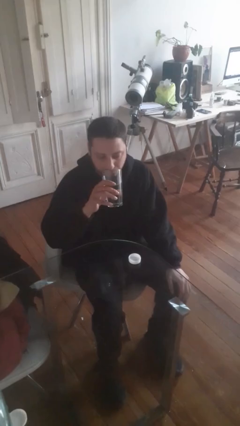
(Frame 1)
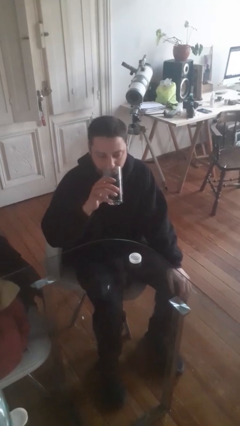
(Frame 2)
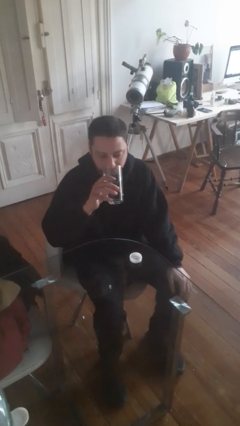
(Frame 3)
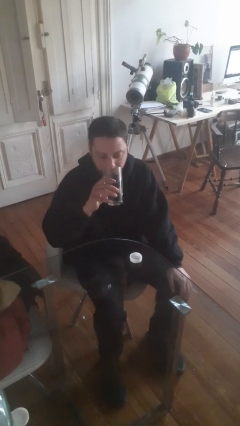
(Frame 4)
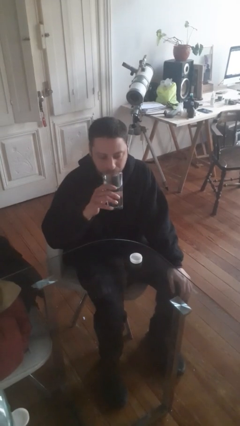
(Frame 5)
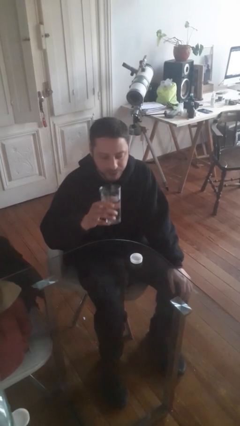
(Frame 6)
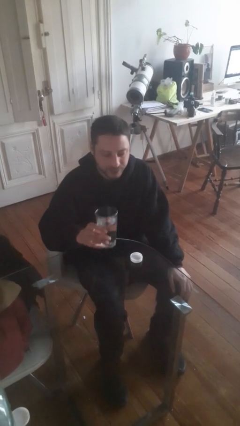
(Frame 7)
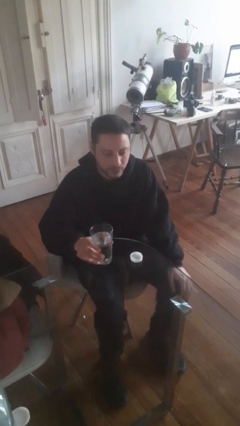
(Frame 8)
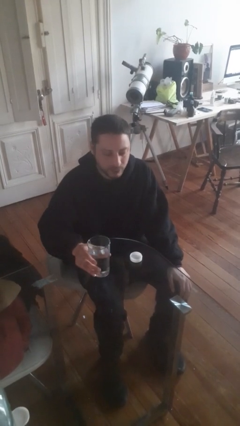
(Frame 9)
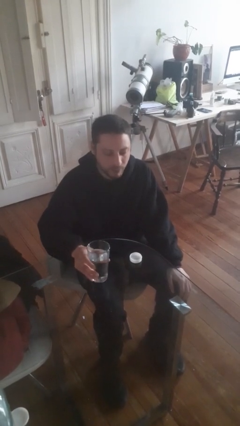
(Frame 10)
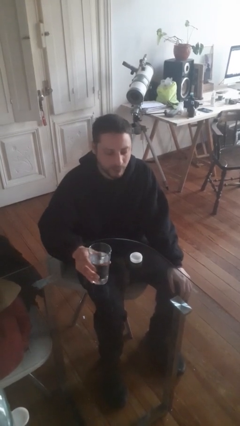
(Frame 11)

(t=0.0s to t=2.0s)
person drinks from cup

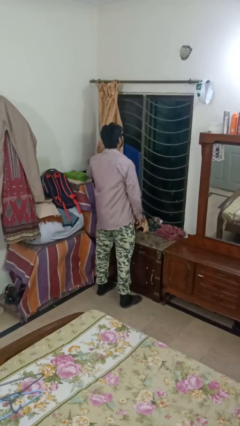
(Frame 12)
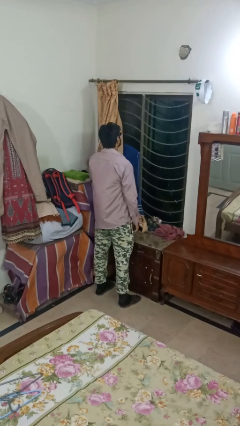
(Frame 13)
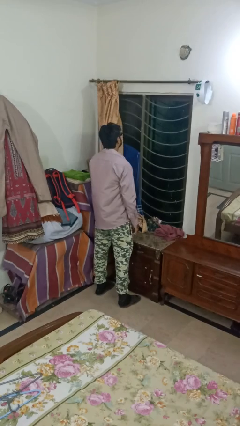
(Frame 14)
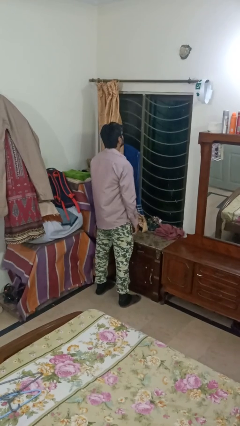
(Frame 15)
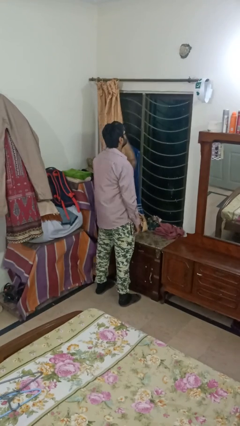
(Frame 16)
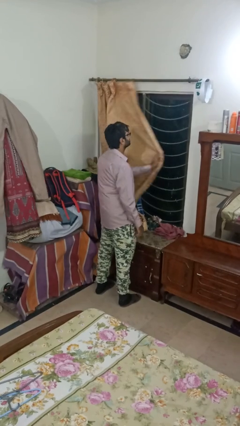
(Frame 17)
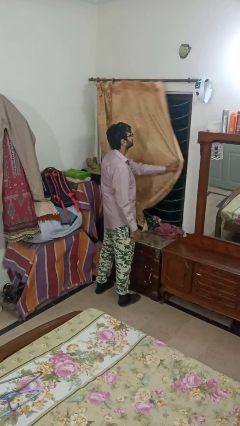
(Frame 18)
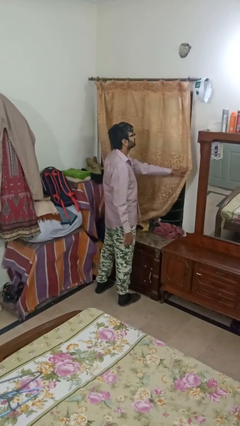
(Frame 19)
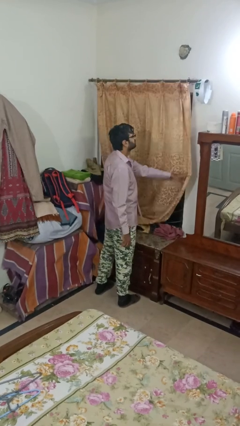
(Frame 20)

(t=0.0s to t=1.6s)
person closes curtains

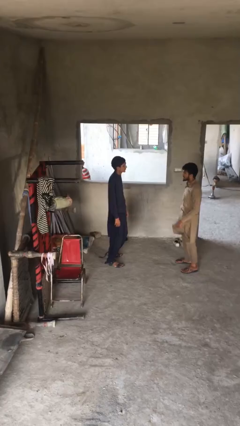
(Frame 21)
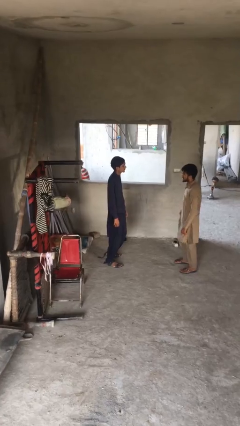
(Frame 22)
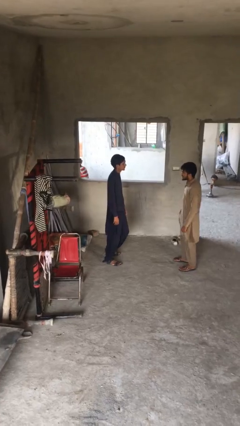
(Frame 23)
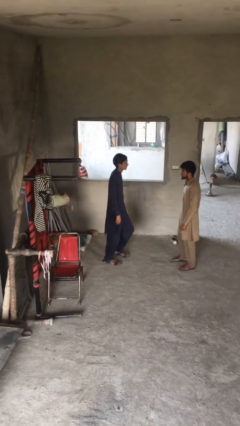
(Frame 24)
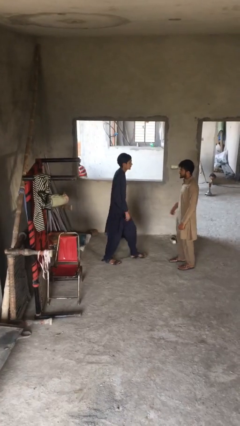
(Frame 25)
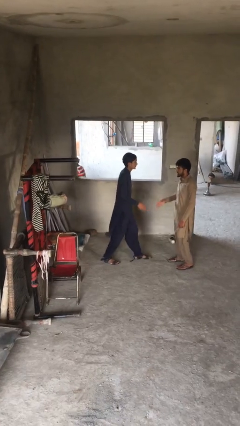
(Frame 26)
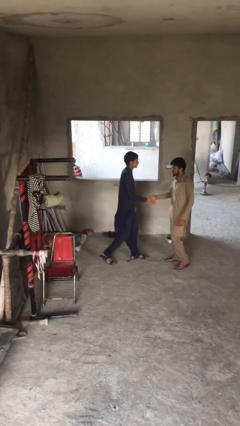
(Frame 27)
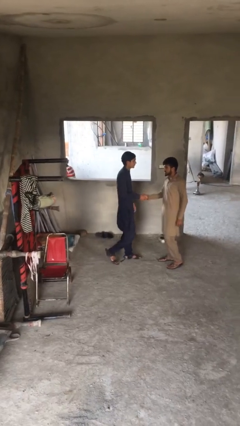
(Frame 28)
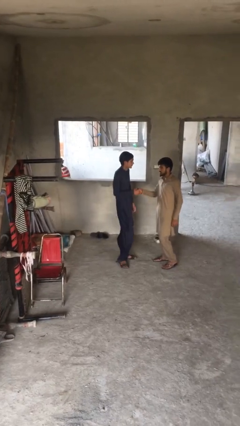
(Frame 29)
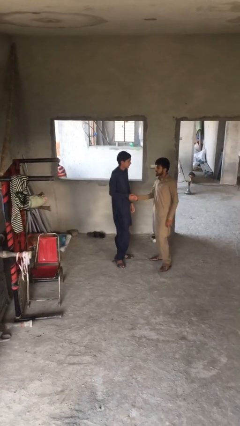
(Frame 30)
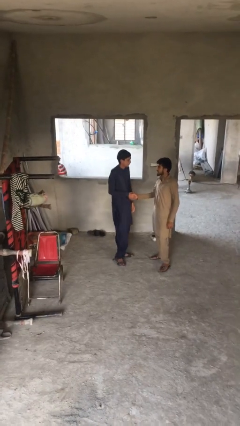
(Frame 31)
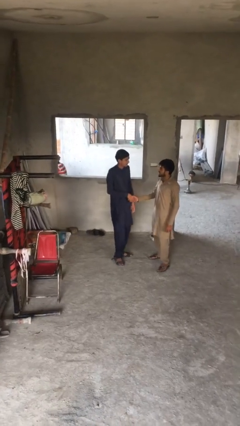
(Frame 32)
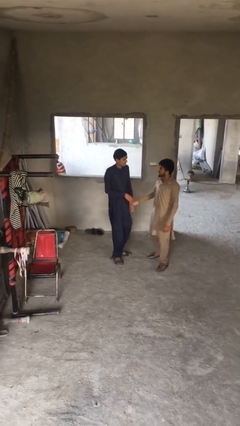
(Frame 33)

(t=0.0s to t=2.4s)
person shakes hand

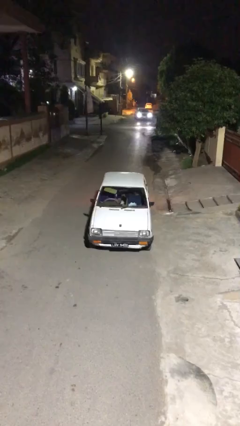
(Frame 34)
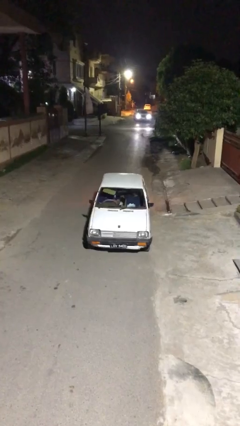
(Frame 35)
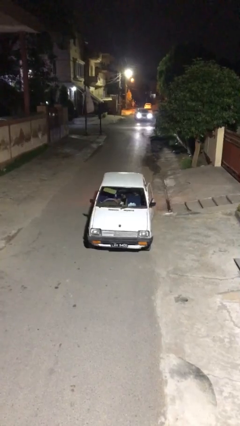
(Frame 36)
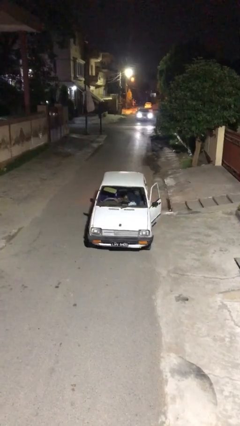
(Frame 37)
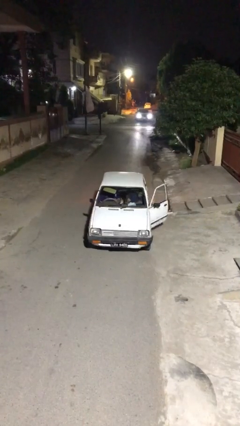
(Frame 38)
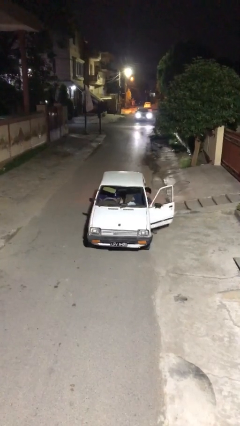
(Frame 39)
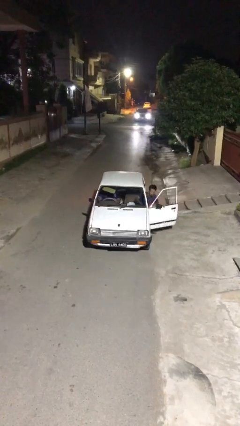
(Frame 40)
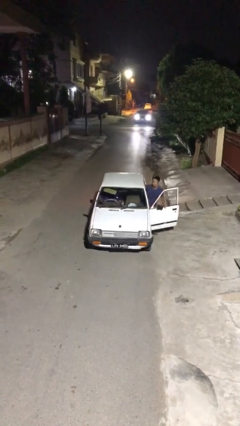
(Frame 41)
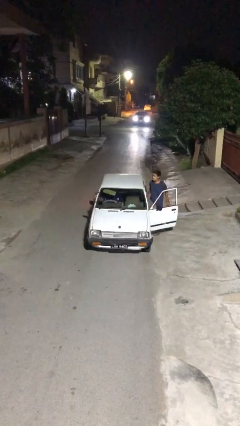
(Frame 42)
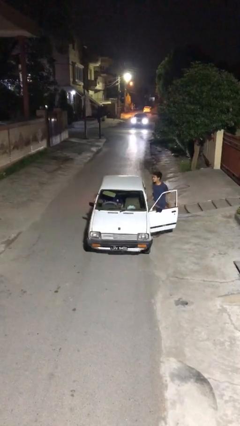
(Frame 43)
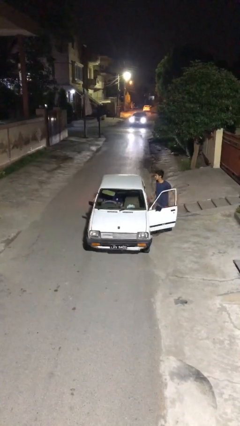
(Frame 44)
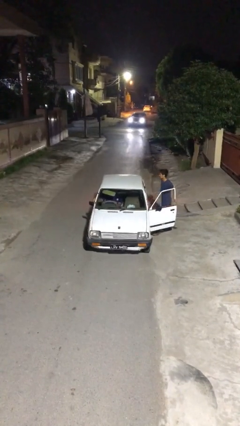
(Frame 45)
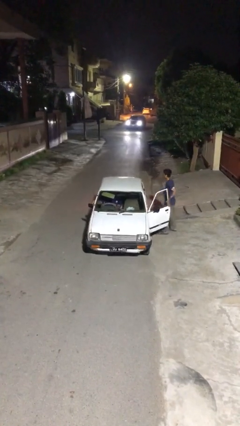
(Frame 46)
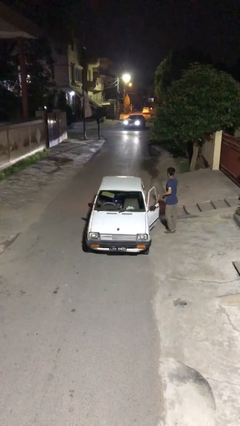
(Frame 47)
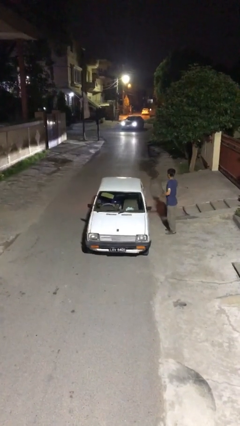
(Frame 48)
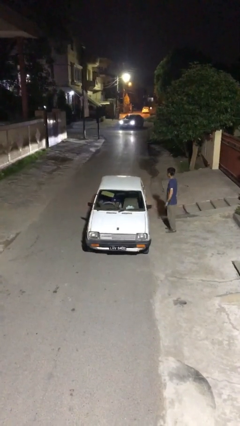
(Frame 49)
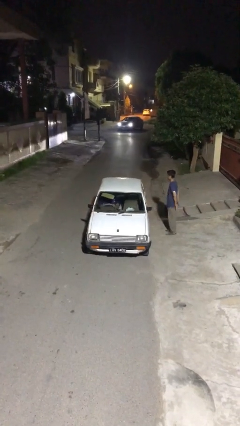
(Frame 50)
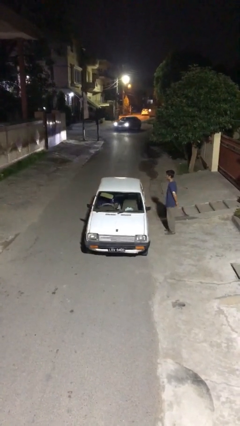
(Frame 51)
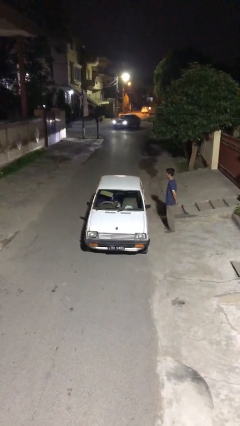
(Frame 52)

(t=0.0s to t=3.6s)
car drops off person

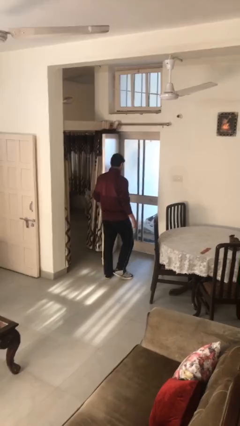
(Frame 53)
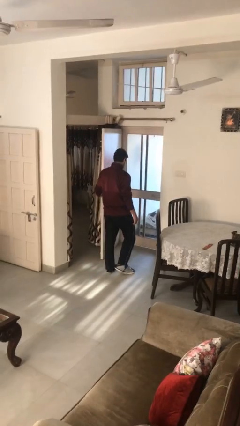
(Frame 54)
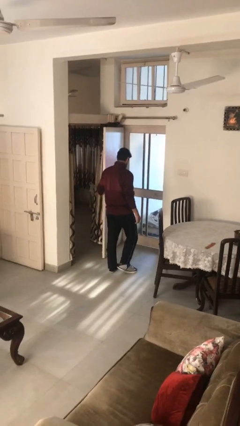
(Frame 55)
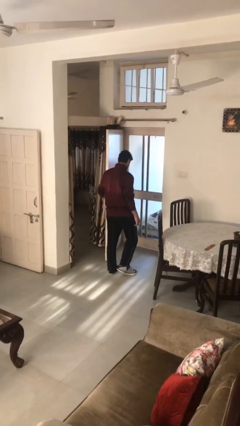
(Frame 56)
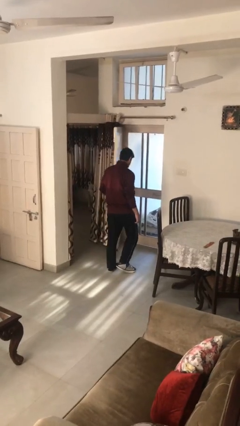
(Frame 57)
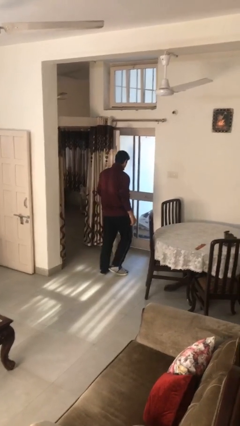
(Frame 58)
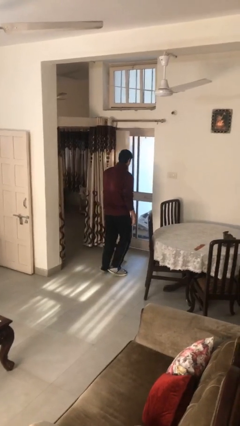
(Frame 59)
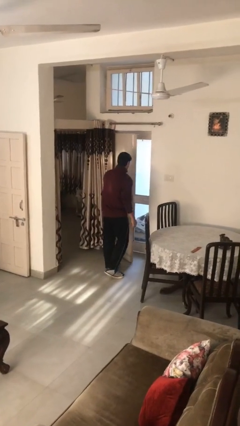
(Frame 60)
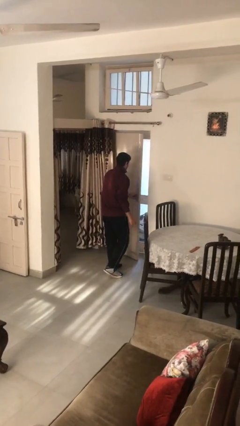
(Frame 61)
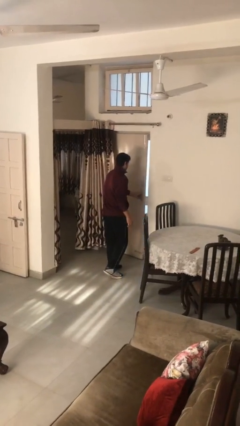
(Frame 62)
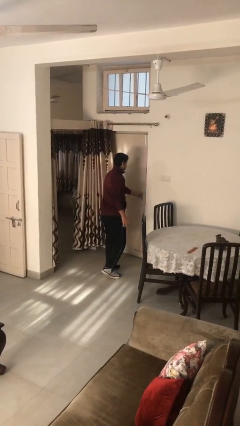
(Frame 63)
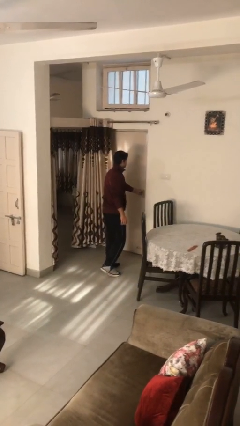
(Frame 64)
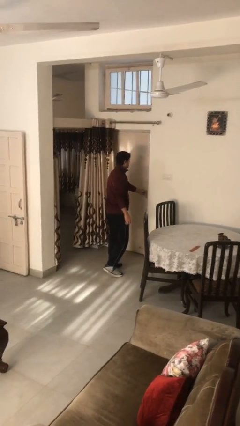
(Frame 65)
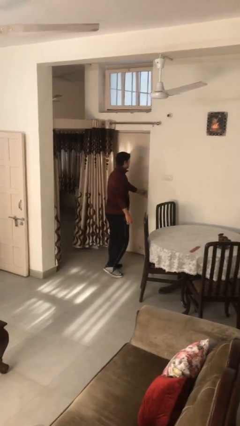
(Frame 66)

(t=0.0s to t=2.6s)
person closes facility door

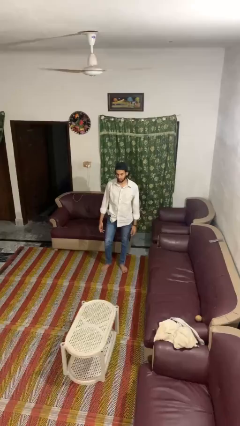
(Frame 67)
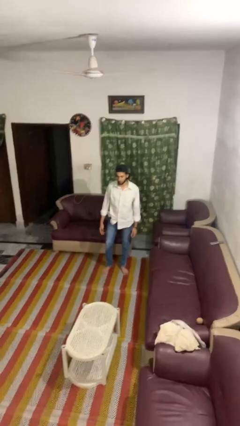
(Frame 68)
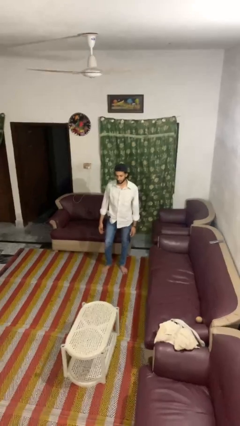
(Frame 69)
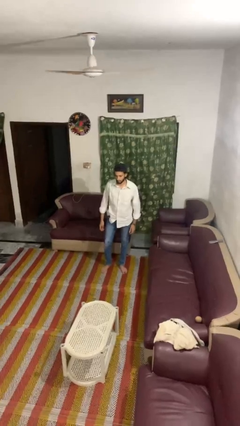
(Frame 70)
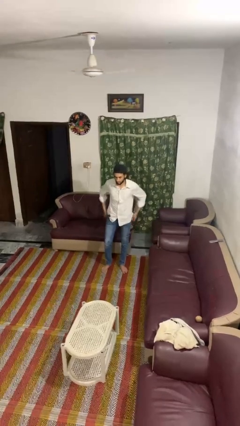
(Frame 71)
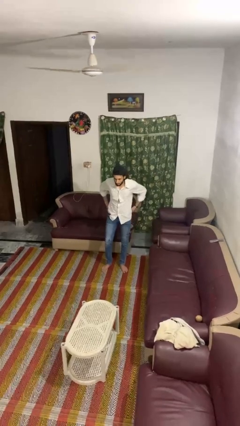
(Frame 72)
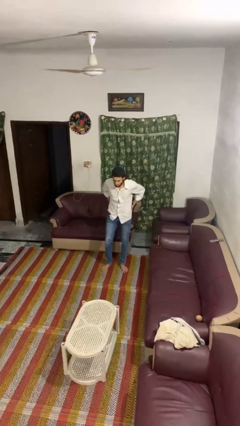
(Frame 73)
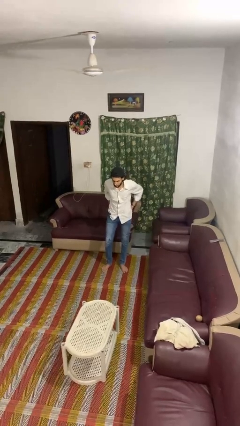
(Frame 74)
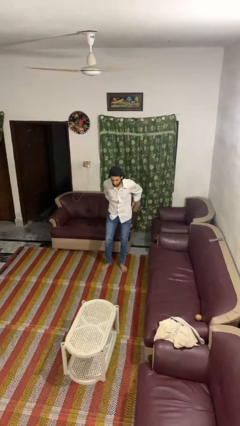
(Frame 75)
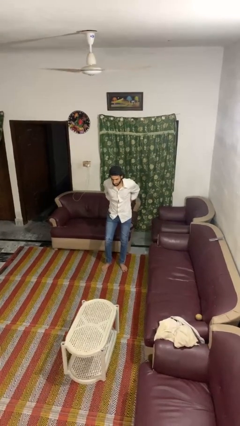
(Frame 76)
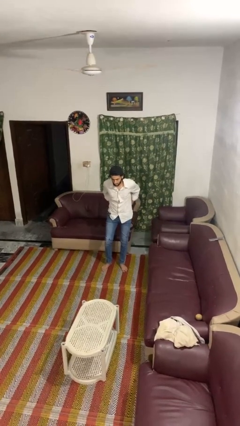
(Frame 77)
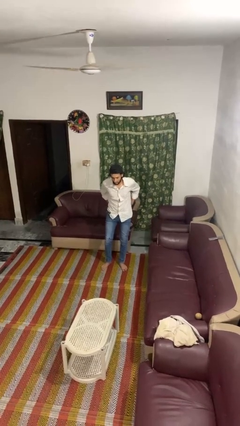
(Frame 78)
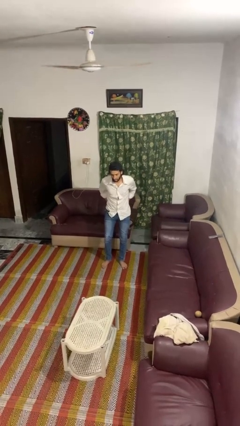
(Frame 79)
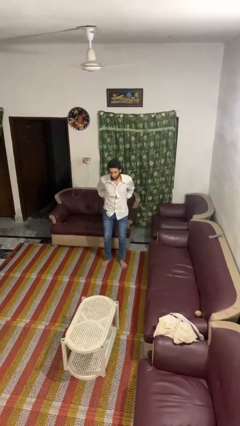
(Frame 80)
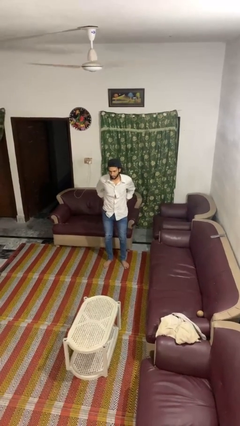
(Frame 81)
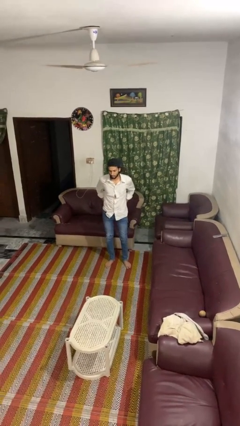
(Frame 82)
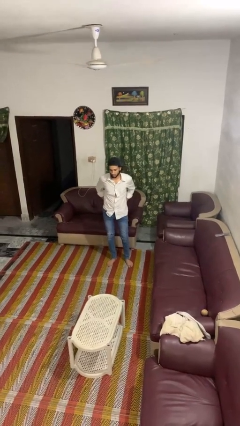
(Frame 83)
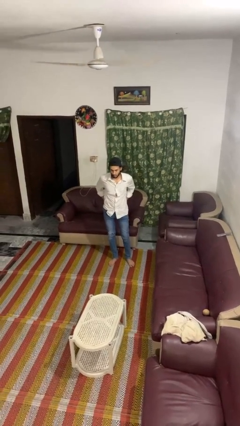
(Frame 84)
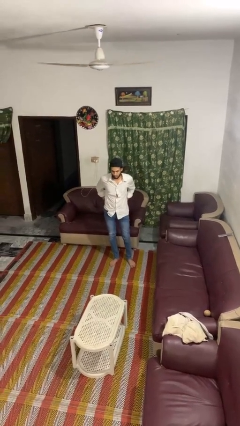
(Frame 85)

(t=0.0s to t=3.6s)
person puts hands in back pockets

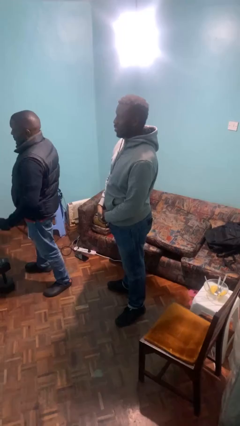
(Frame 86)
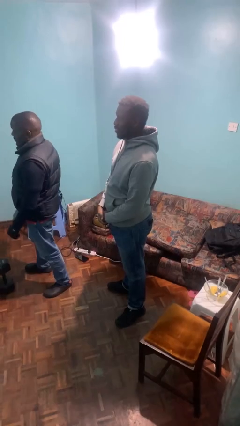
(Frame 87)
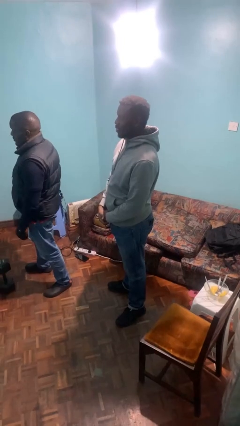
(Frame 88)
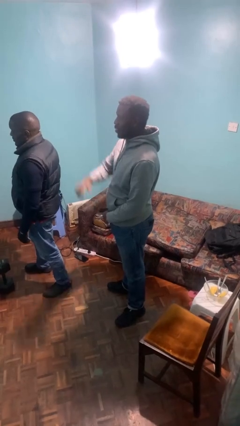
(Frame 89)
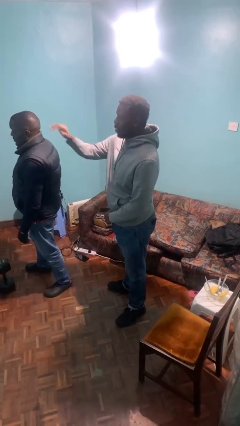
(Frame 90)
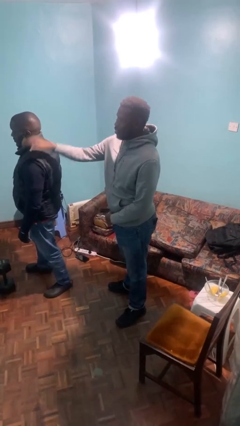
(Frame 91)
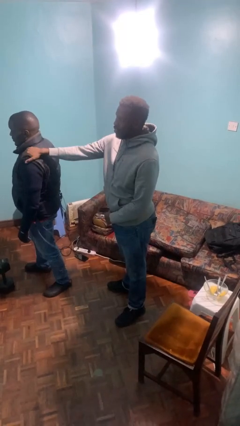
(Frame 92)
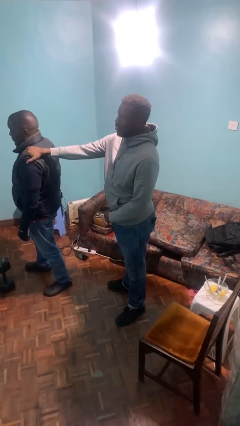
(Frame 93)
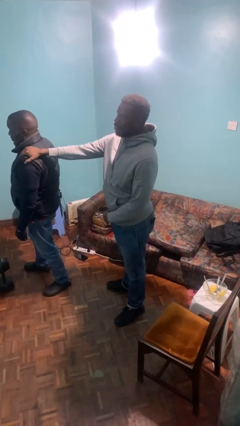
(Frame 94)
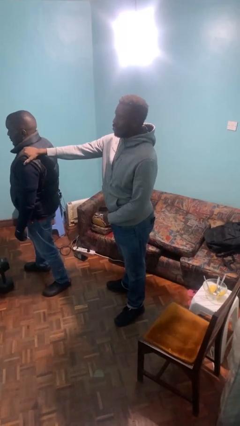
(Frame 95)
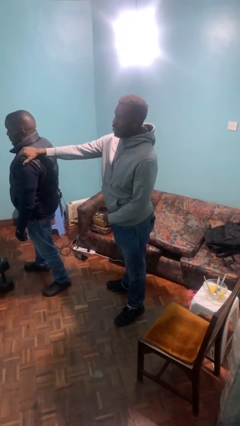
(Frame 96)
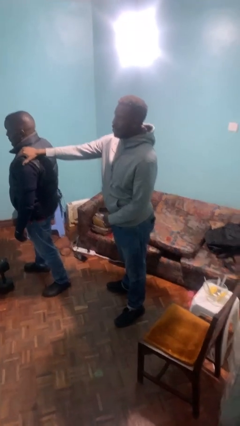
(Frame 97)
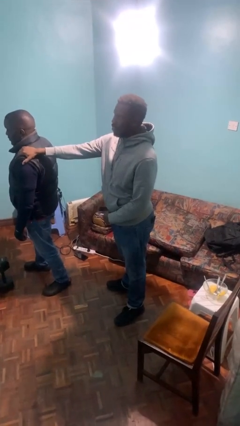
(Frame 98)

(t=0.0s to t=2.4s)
person grabs person by shoulder